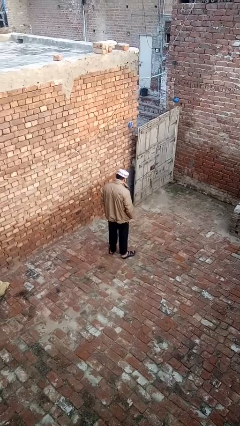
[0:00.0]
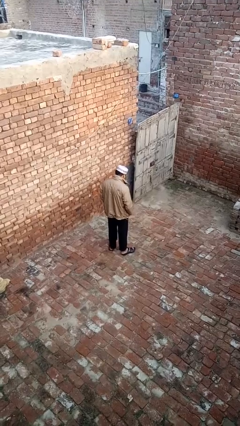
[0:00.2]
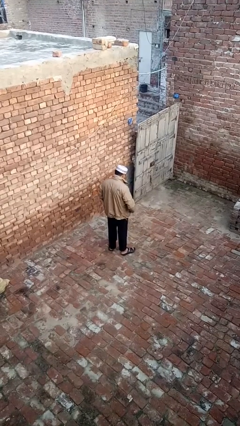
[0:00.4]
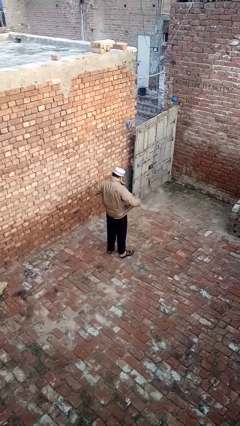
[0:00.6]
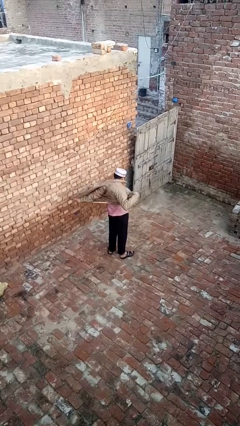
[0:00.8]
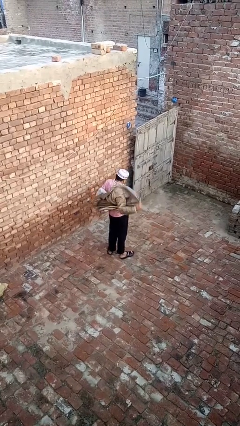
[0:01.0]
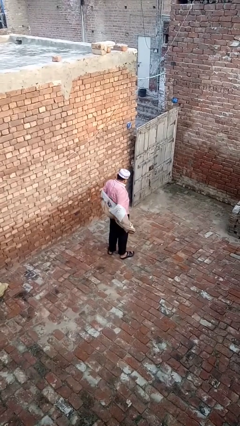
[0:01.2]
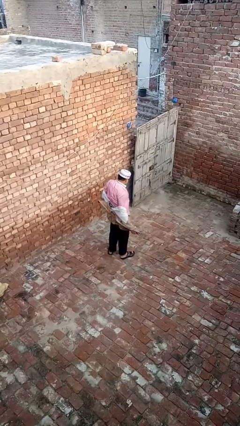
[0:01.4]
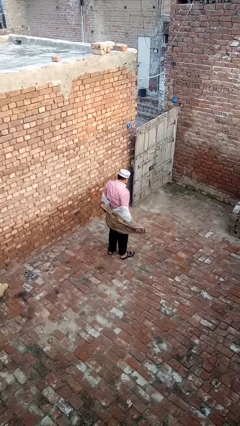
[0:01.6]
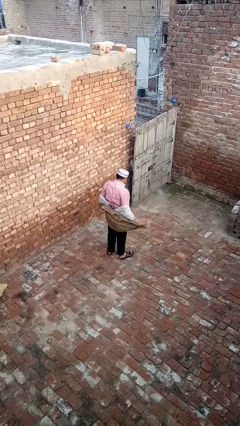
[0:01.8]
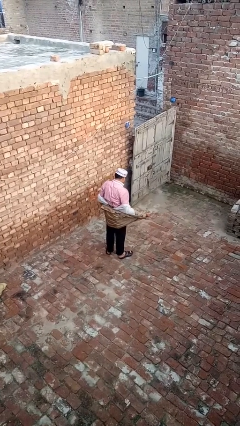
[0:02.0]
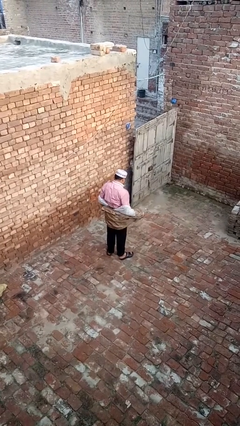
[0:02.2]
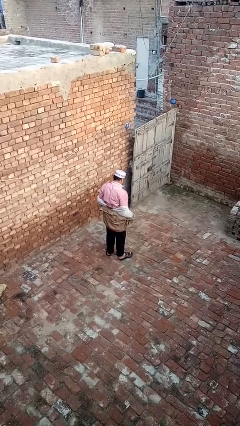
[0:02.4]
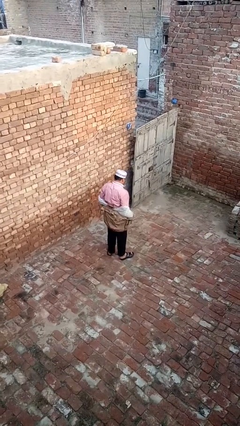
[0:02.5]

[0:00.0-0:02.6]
person takes off jacket

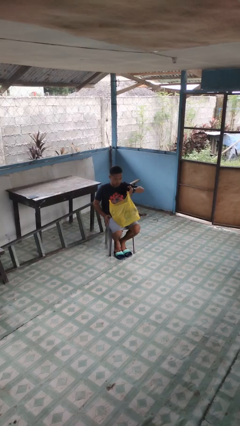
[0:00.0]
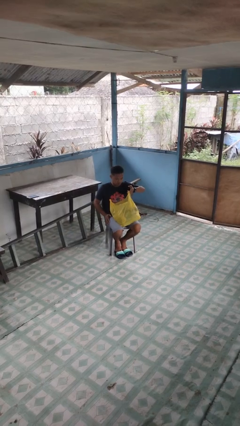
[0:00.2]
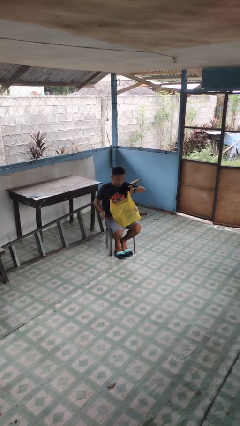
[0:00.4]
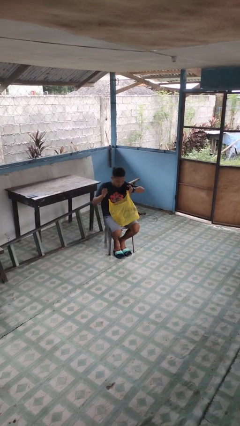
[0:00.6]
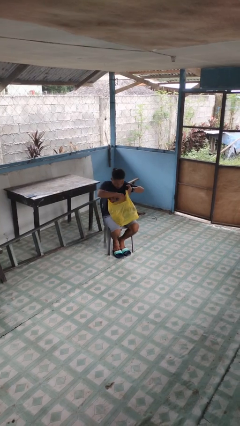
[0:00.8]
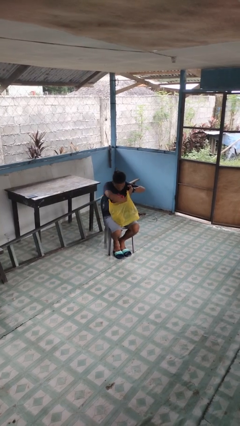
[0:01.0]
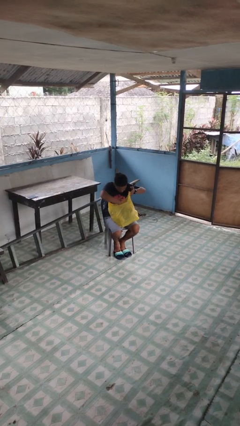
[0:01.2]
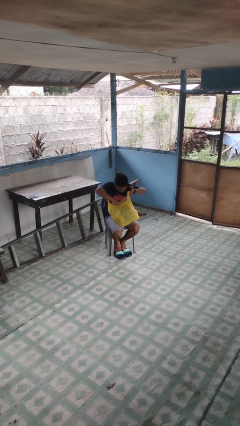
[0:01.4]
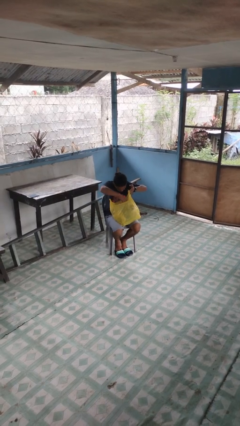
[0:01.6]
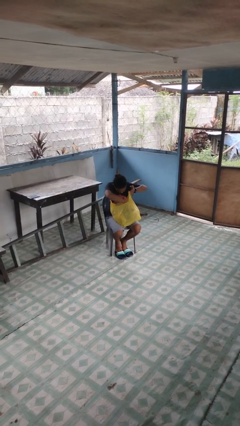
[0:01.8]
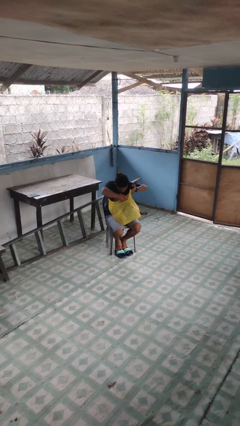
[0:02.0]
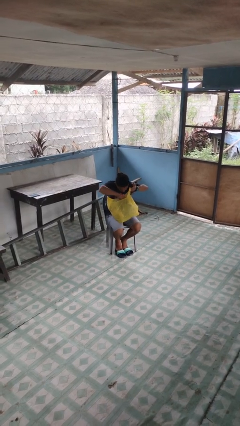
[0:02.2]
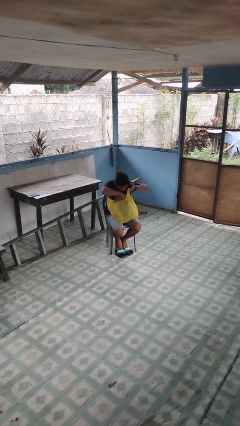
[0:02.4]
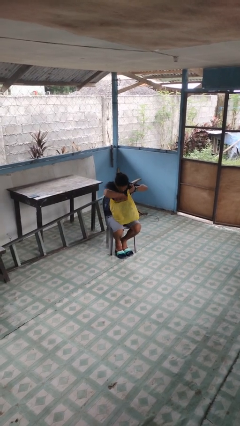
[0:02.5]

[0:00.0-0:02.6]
person searches in bag

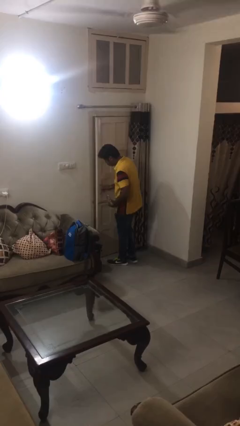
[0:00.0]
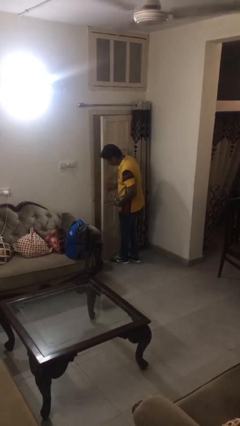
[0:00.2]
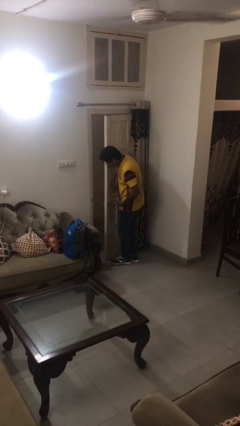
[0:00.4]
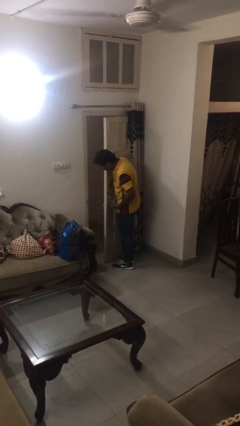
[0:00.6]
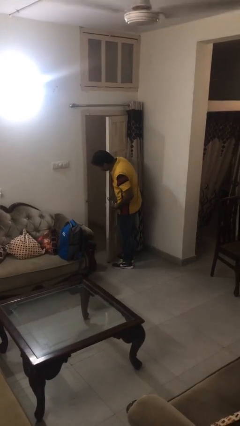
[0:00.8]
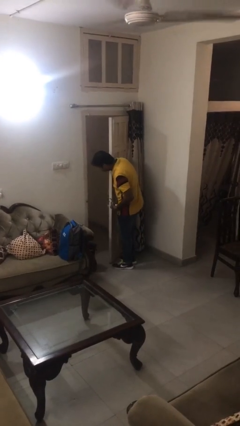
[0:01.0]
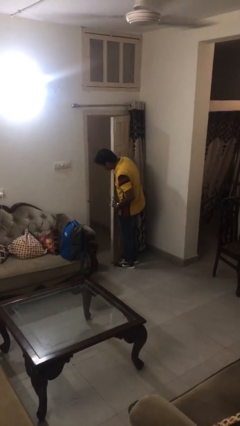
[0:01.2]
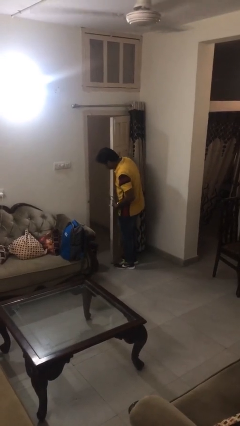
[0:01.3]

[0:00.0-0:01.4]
person opens facility door

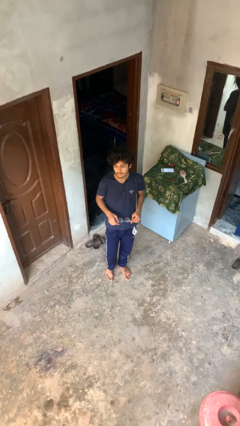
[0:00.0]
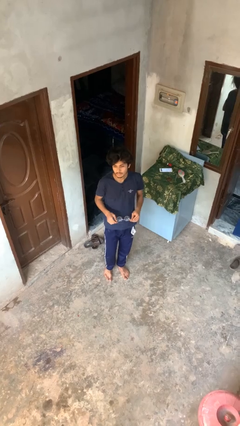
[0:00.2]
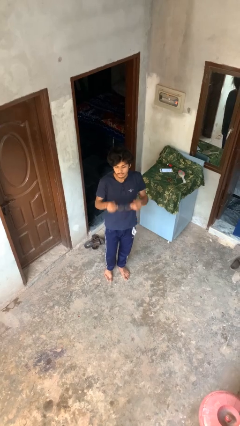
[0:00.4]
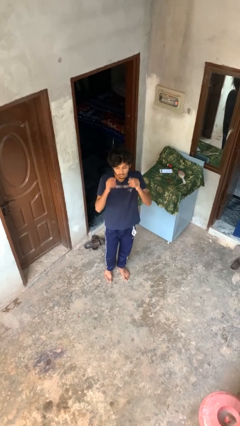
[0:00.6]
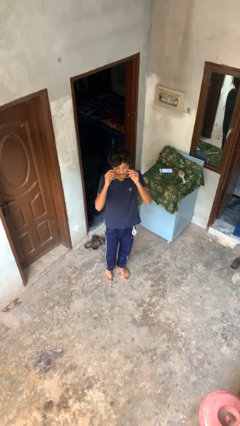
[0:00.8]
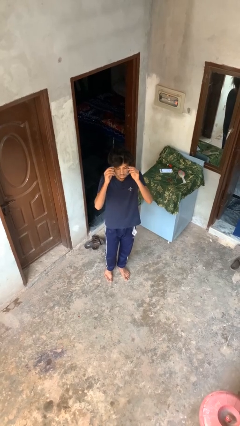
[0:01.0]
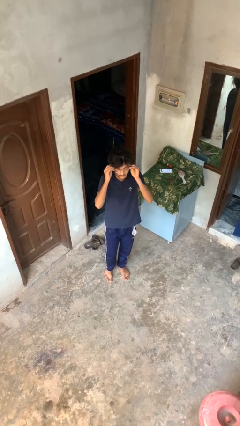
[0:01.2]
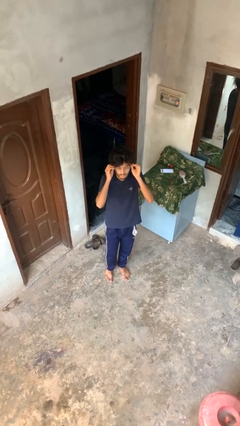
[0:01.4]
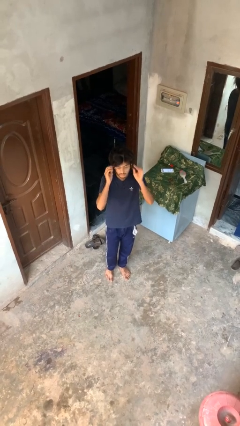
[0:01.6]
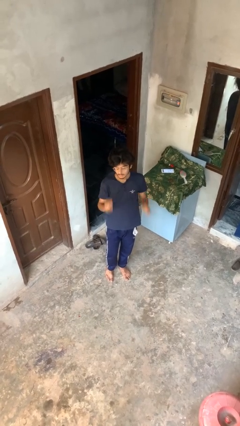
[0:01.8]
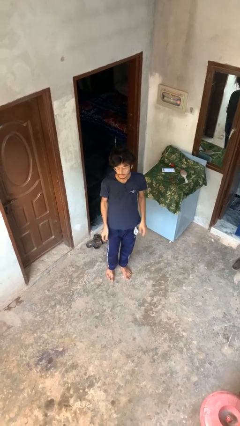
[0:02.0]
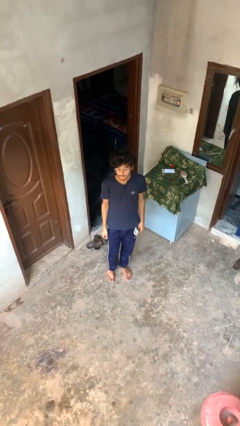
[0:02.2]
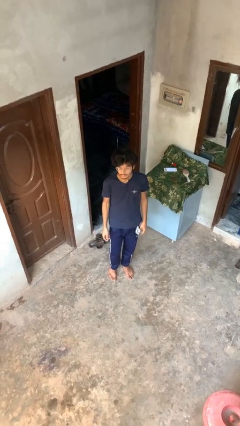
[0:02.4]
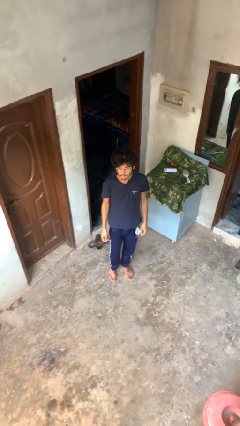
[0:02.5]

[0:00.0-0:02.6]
person puts on glasses

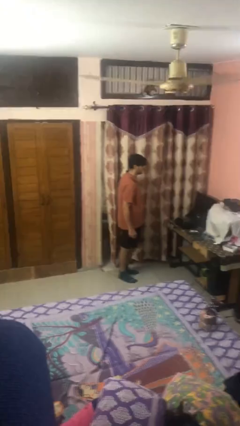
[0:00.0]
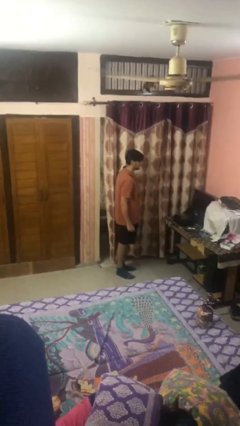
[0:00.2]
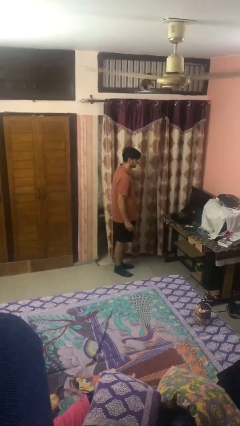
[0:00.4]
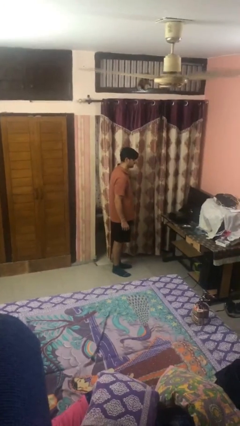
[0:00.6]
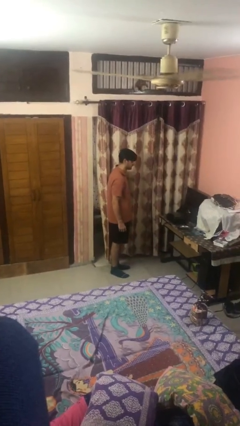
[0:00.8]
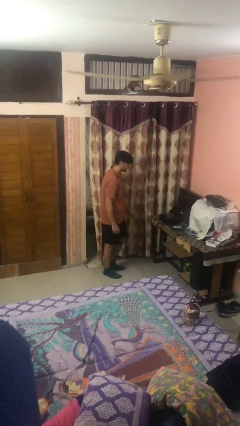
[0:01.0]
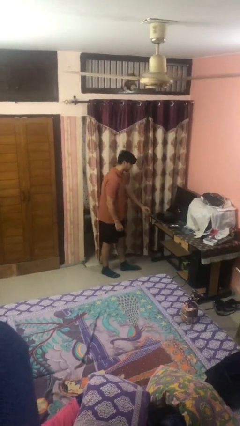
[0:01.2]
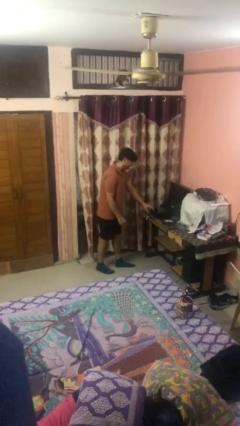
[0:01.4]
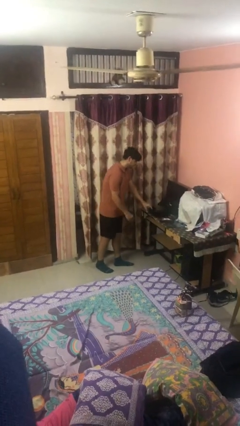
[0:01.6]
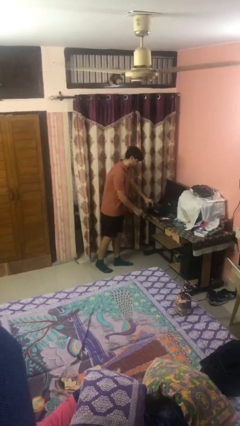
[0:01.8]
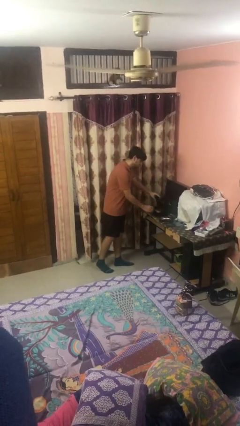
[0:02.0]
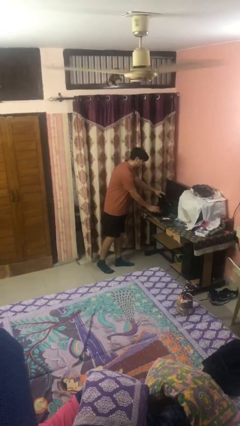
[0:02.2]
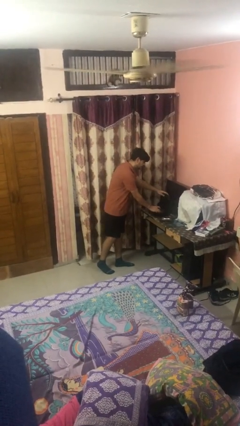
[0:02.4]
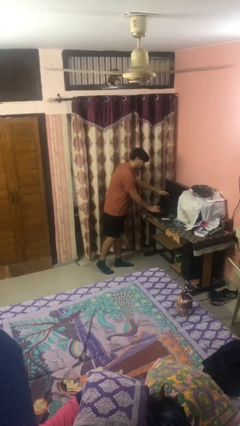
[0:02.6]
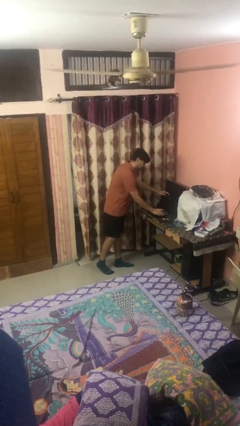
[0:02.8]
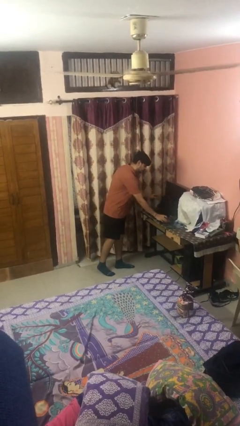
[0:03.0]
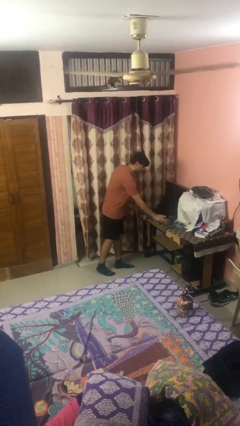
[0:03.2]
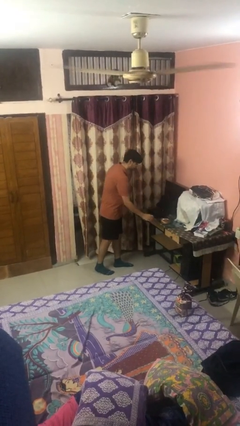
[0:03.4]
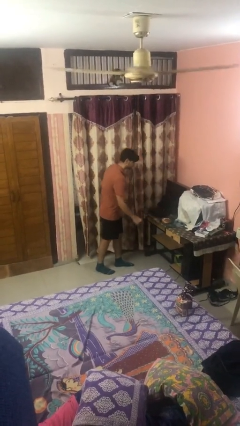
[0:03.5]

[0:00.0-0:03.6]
person takes object from toaster

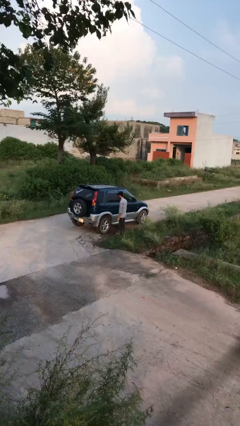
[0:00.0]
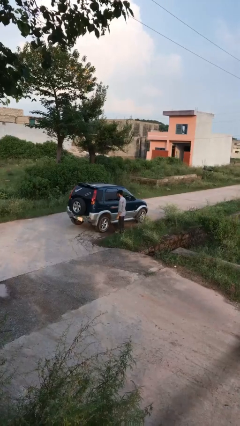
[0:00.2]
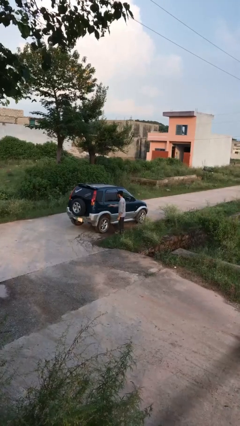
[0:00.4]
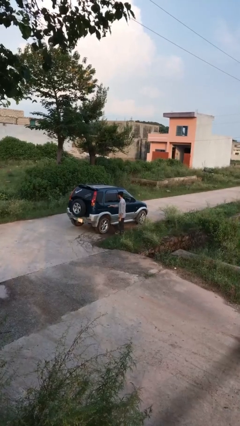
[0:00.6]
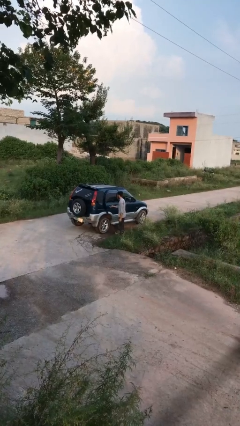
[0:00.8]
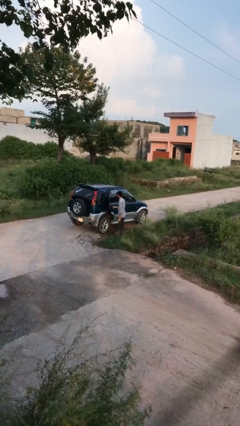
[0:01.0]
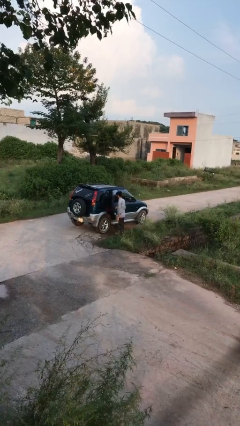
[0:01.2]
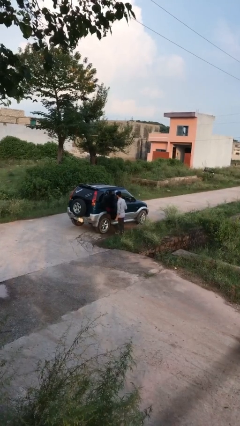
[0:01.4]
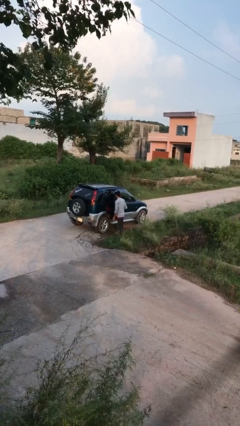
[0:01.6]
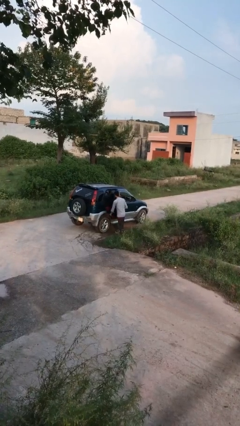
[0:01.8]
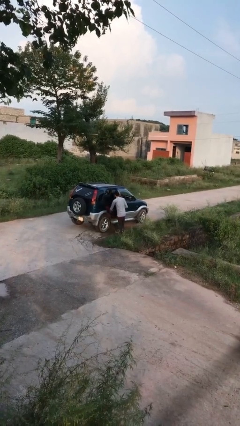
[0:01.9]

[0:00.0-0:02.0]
person opens car door

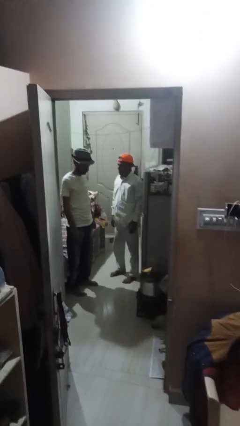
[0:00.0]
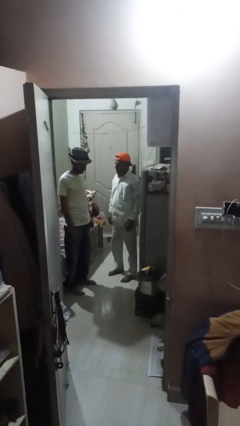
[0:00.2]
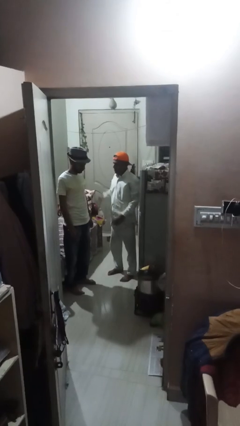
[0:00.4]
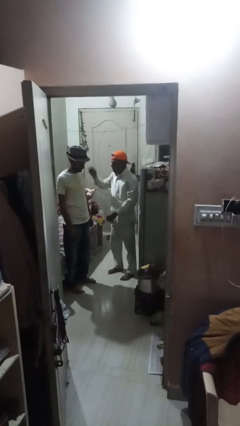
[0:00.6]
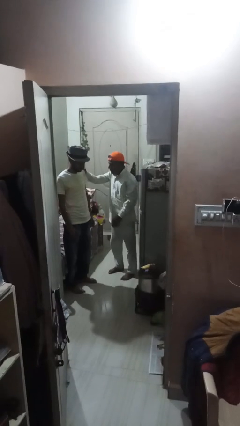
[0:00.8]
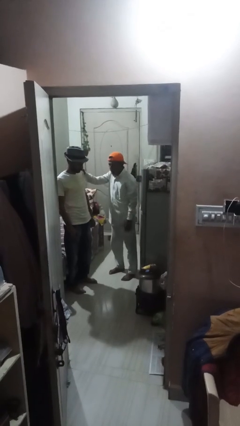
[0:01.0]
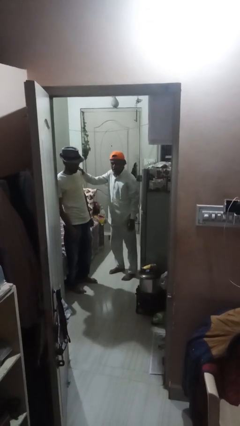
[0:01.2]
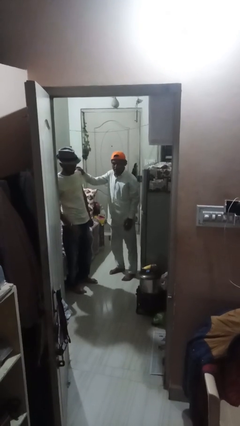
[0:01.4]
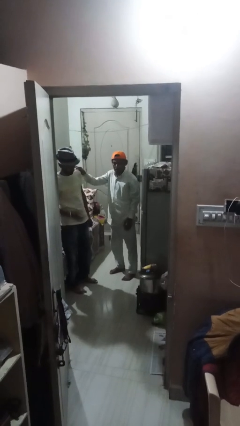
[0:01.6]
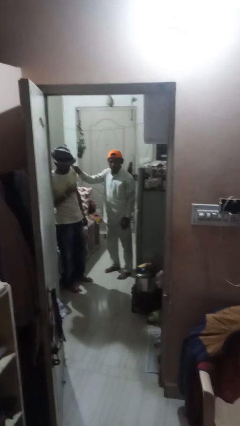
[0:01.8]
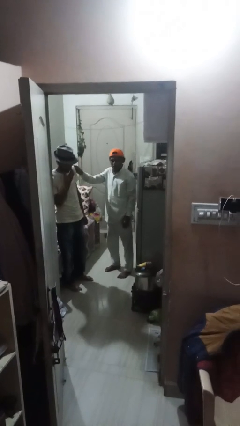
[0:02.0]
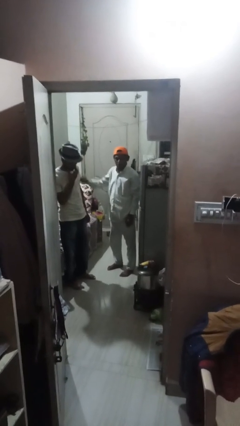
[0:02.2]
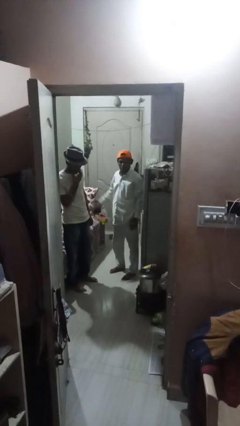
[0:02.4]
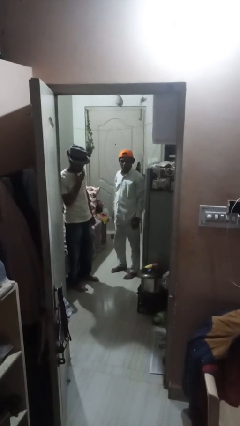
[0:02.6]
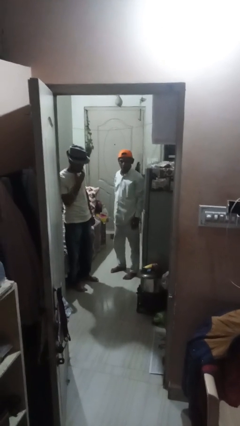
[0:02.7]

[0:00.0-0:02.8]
person shoves person
